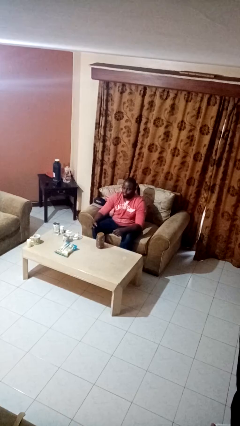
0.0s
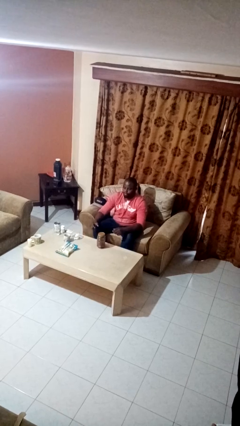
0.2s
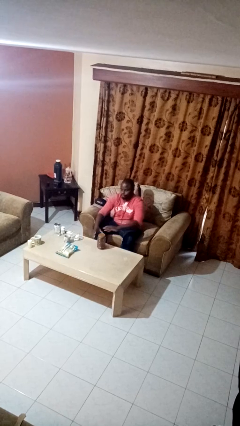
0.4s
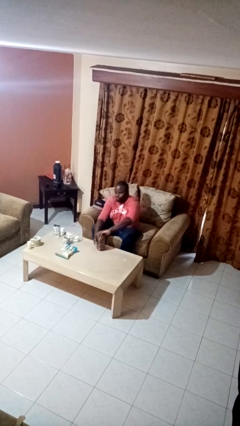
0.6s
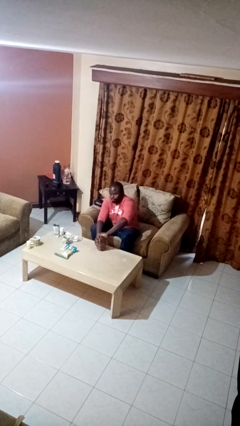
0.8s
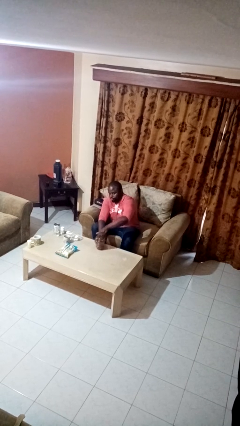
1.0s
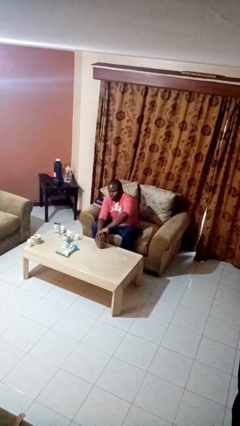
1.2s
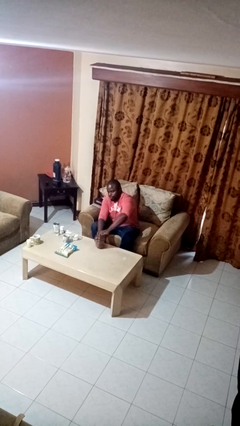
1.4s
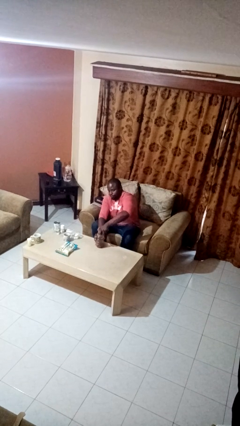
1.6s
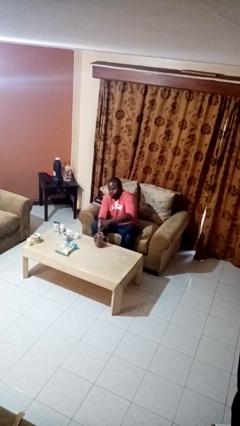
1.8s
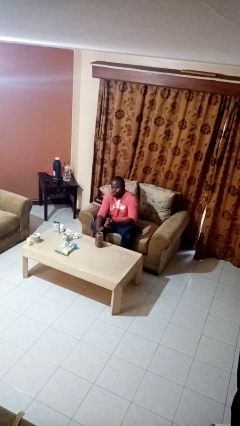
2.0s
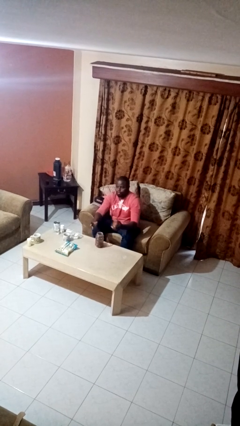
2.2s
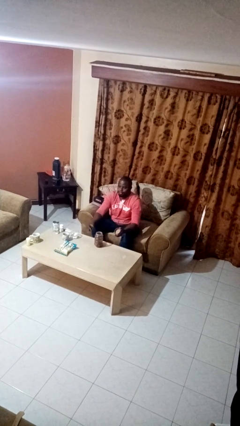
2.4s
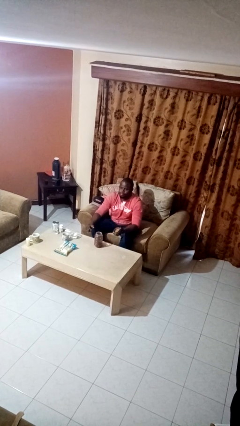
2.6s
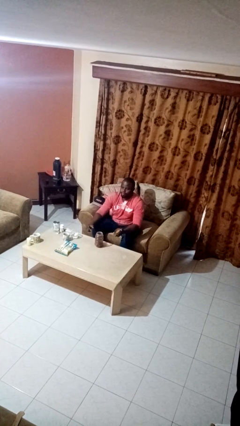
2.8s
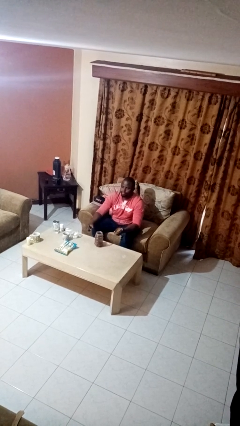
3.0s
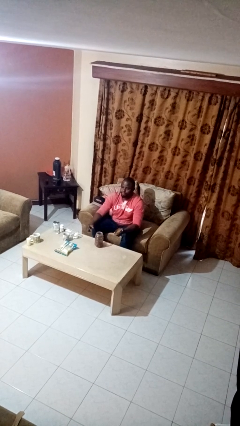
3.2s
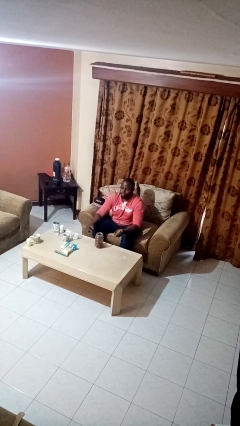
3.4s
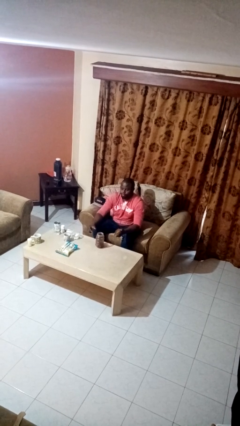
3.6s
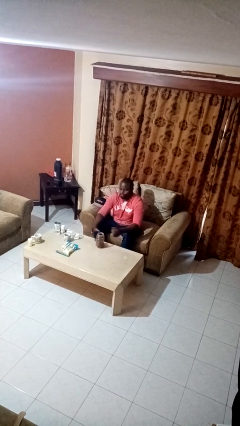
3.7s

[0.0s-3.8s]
person opens jar

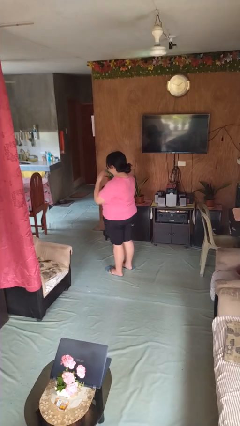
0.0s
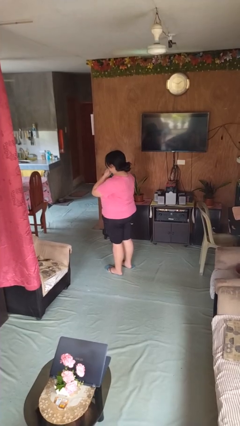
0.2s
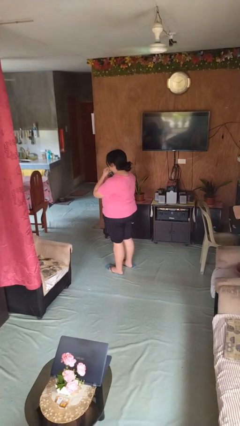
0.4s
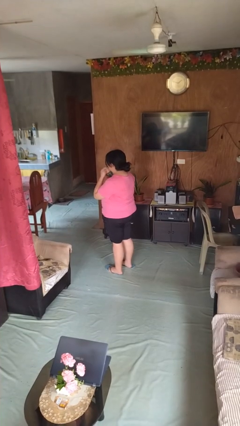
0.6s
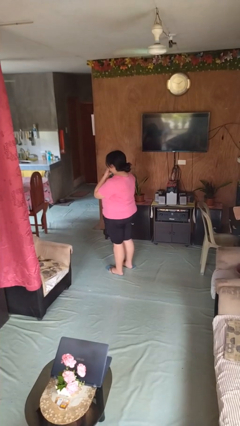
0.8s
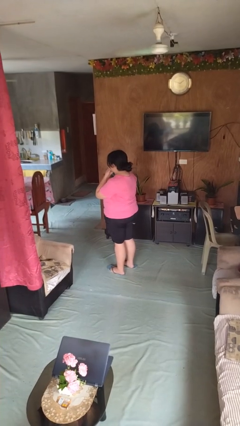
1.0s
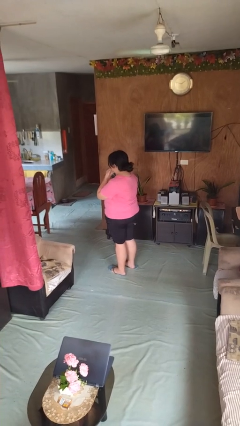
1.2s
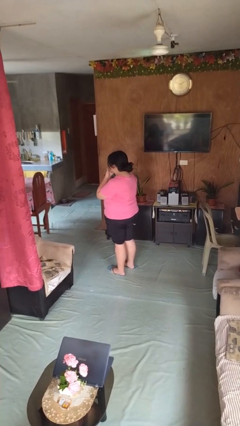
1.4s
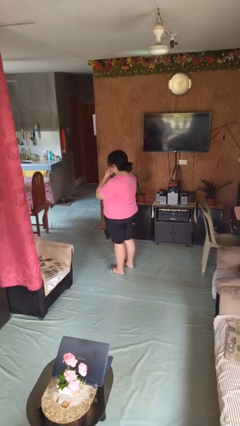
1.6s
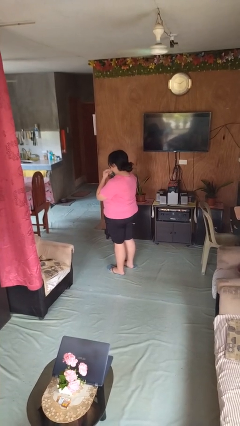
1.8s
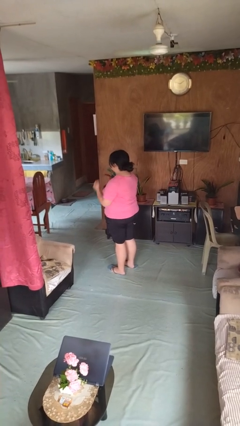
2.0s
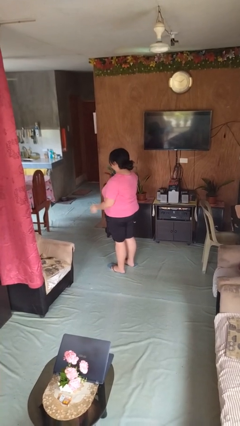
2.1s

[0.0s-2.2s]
person strokes chin

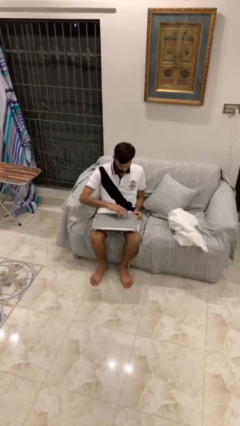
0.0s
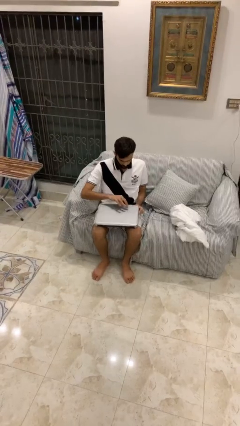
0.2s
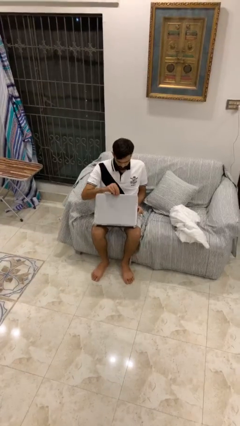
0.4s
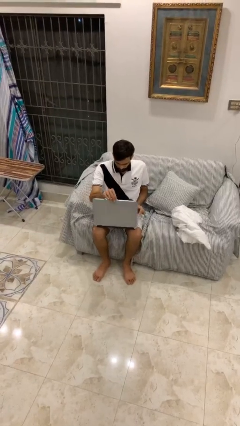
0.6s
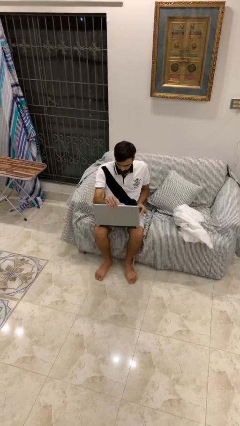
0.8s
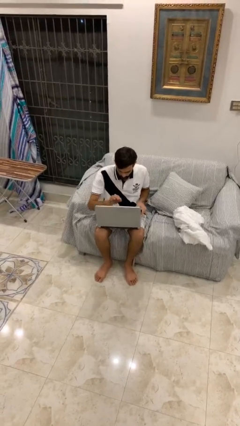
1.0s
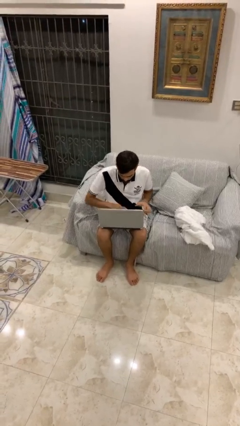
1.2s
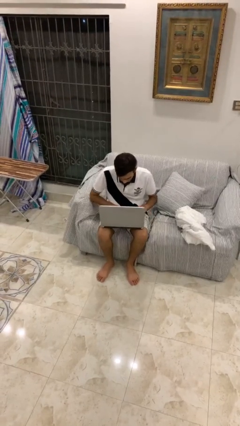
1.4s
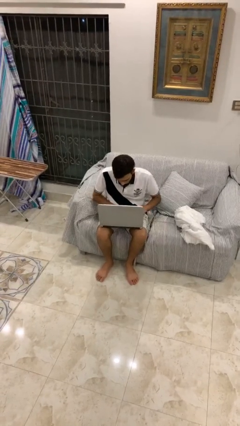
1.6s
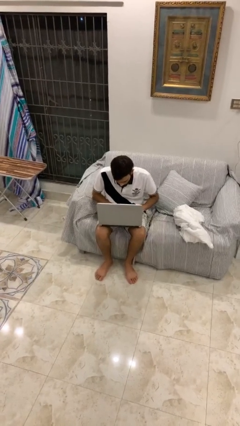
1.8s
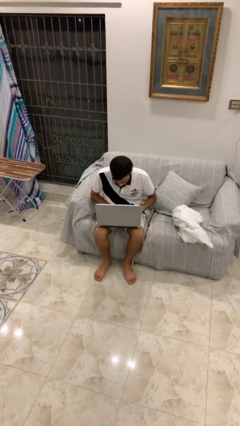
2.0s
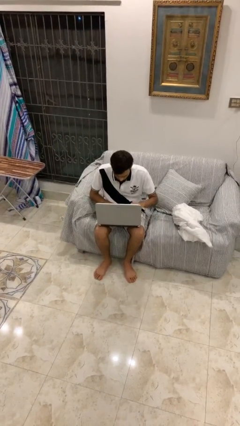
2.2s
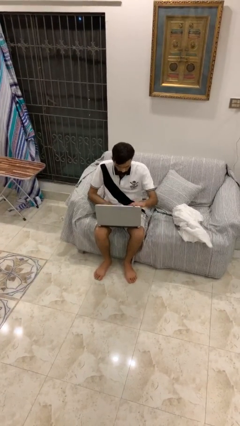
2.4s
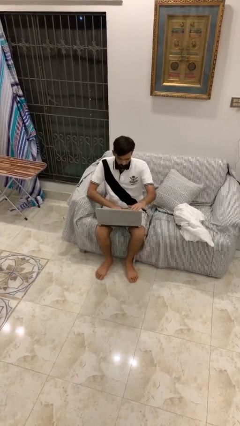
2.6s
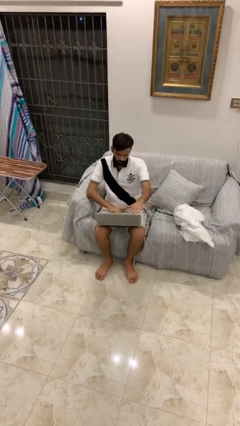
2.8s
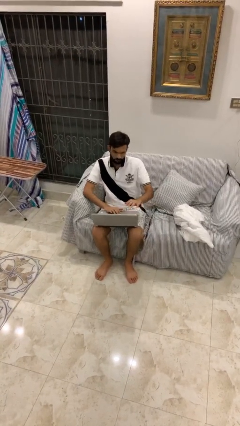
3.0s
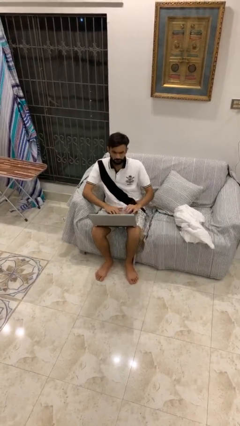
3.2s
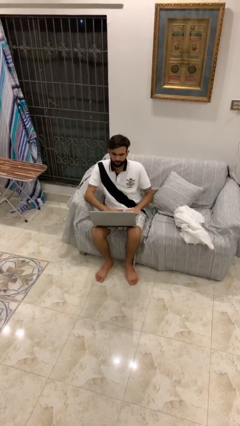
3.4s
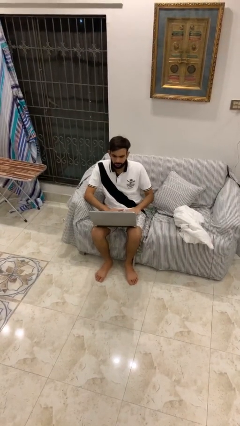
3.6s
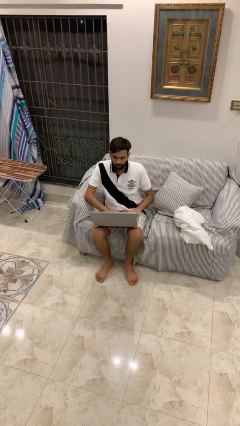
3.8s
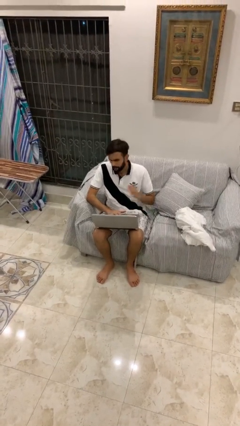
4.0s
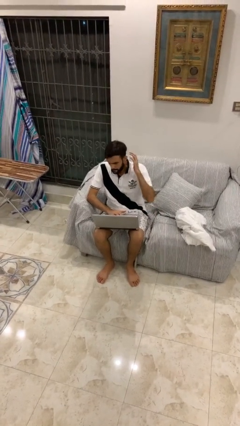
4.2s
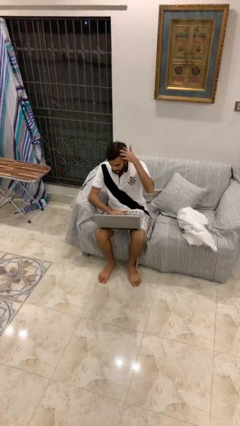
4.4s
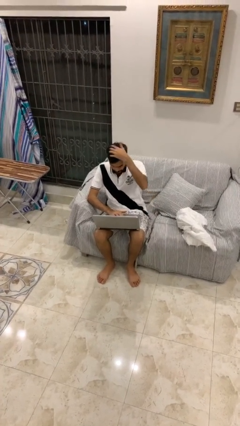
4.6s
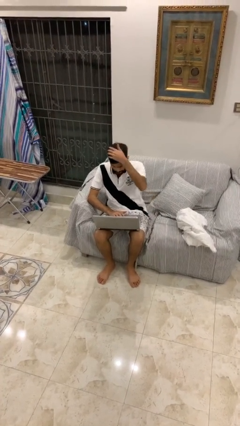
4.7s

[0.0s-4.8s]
person interacts with laptop

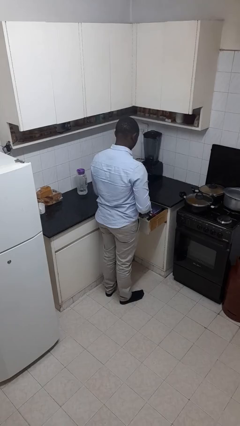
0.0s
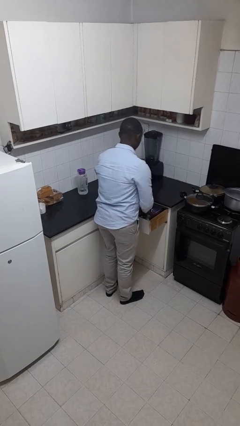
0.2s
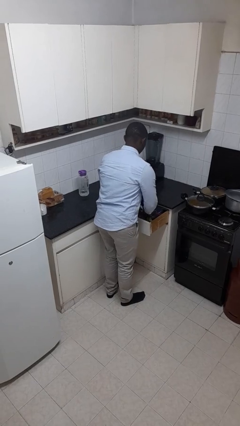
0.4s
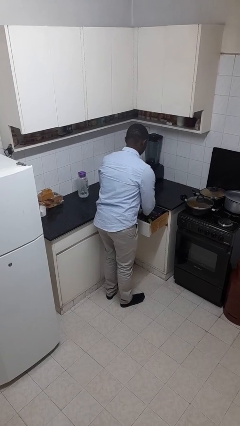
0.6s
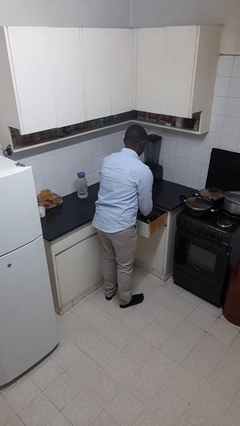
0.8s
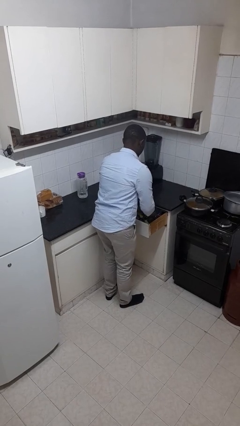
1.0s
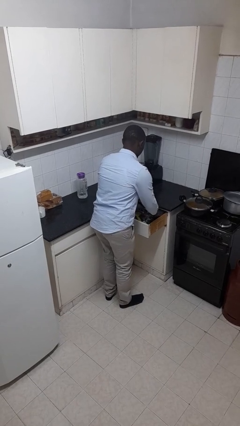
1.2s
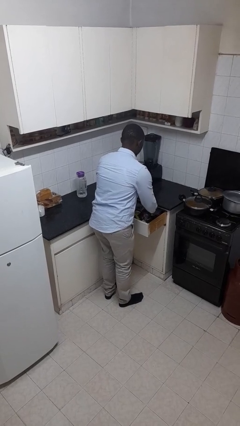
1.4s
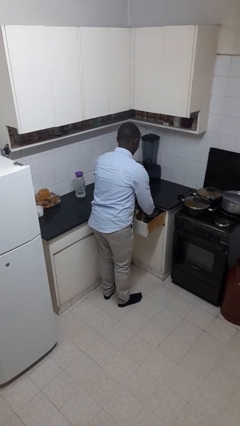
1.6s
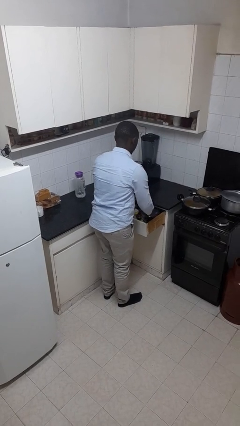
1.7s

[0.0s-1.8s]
person searches in kitchen drawer

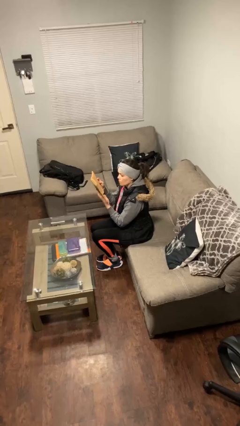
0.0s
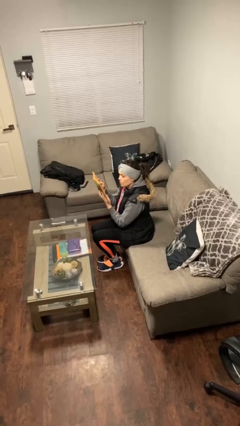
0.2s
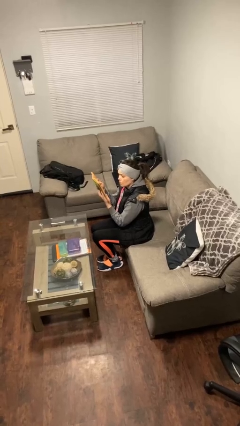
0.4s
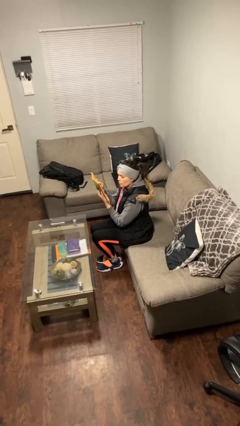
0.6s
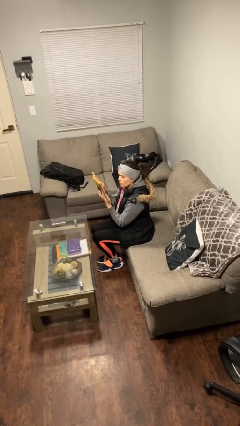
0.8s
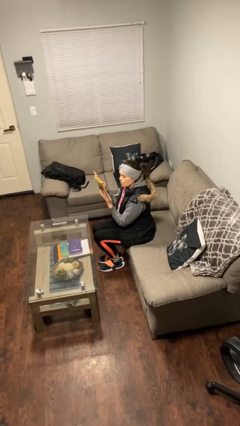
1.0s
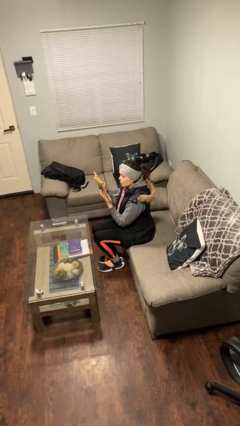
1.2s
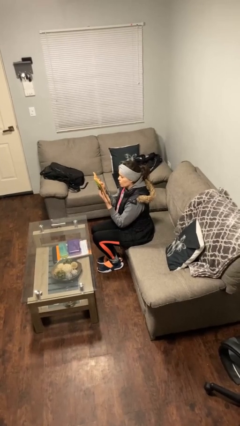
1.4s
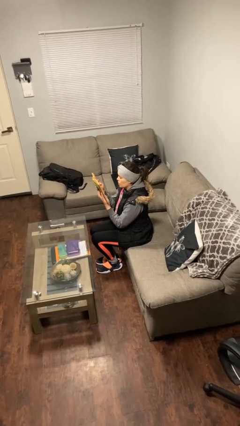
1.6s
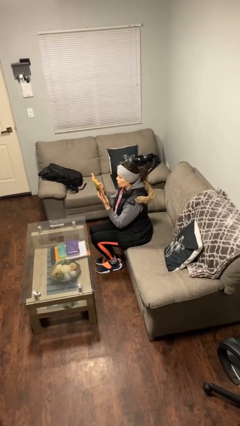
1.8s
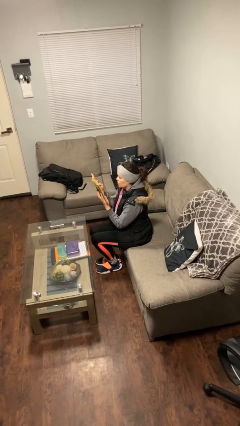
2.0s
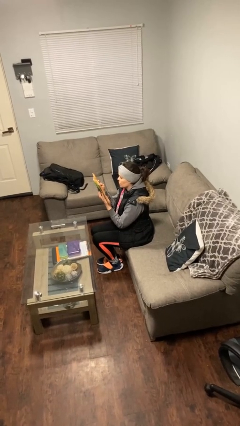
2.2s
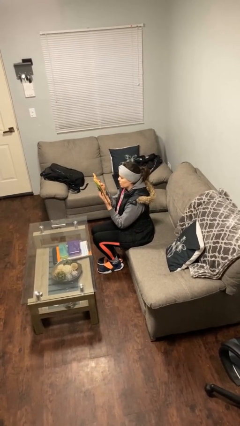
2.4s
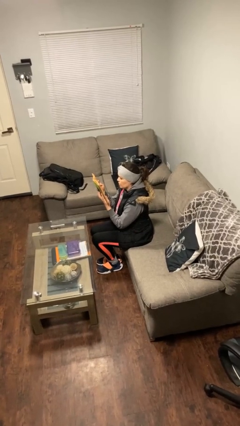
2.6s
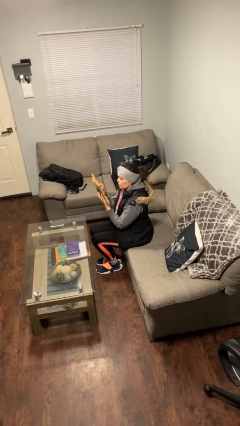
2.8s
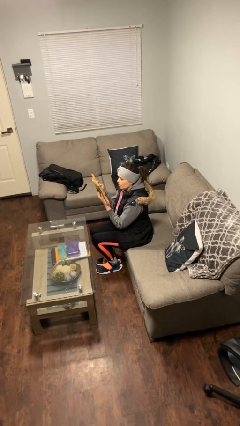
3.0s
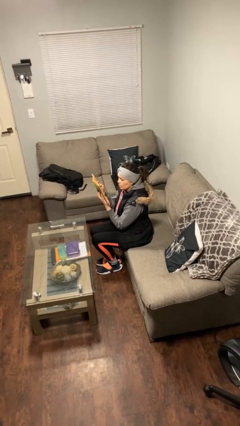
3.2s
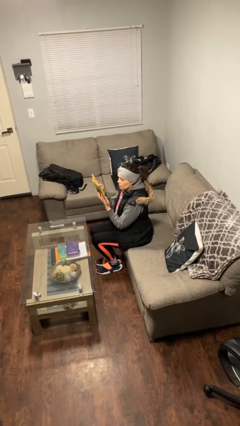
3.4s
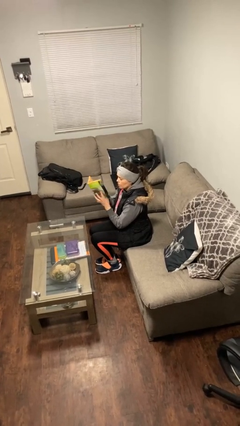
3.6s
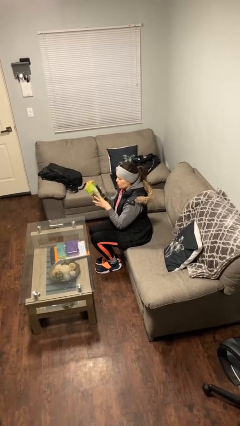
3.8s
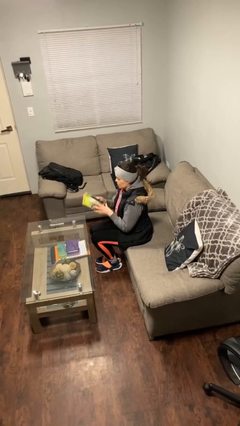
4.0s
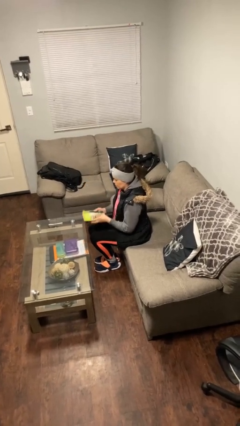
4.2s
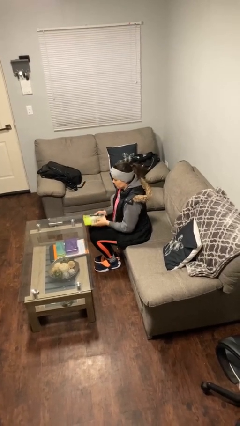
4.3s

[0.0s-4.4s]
person reads document

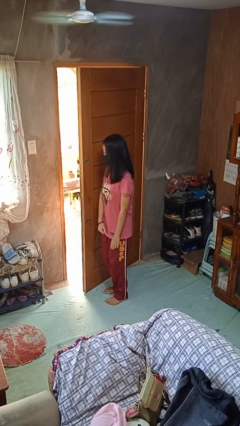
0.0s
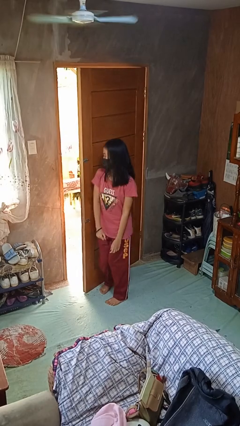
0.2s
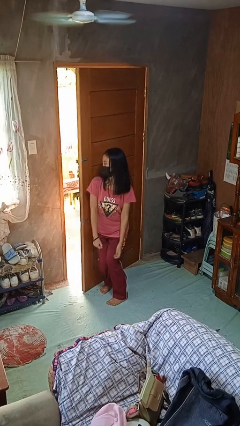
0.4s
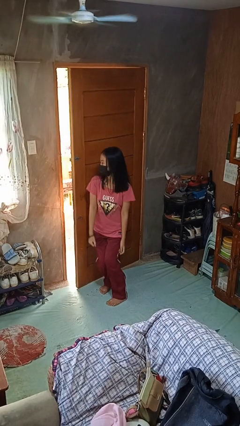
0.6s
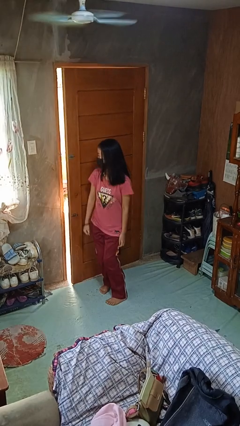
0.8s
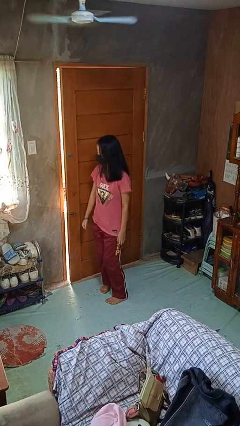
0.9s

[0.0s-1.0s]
person closes door with hip
